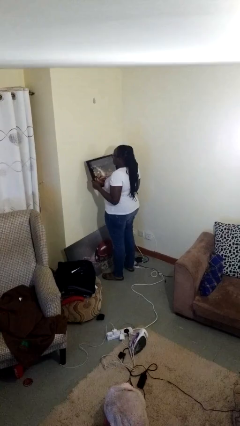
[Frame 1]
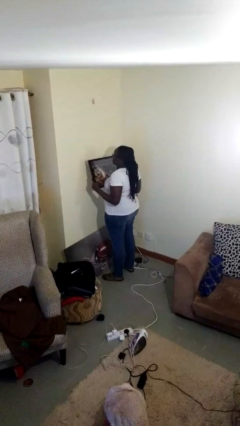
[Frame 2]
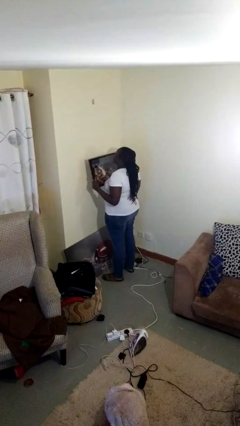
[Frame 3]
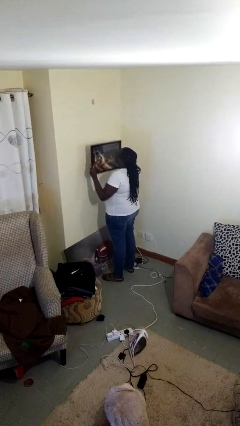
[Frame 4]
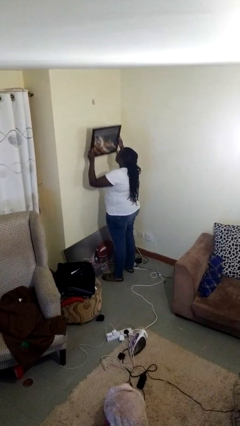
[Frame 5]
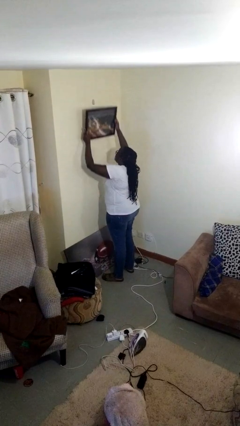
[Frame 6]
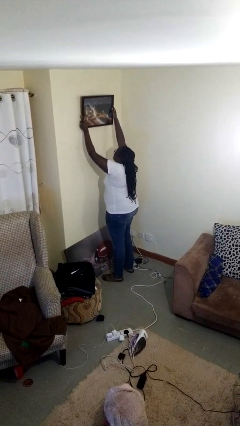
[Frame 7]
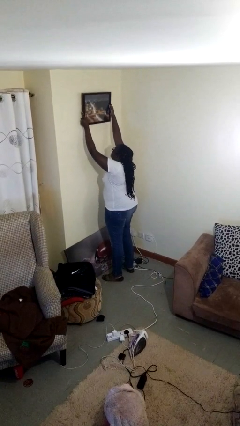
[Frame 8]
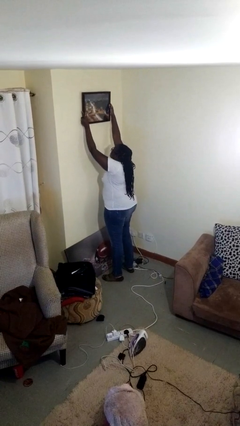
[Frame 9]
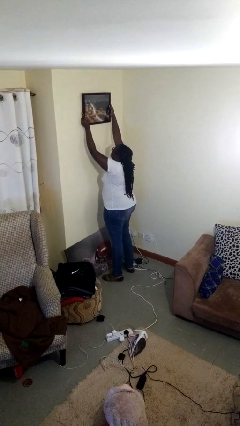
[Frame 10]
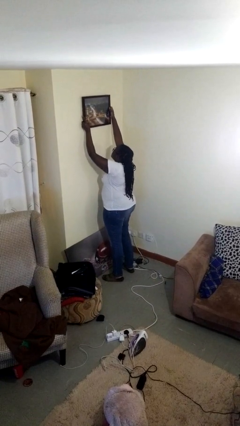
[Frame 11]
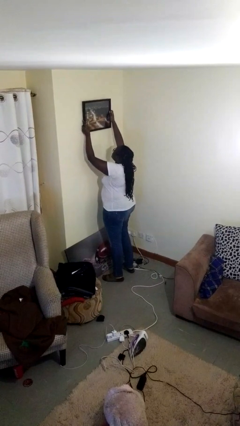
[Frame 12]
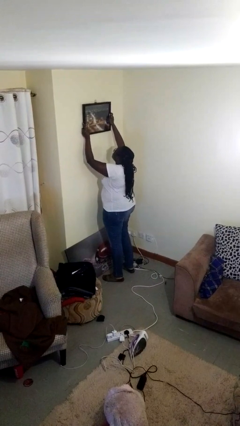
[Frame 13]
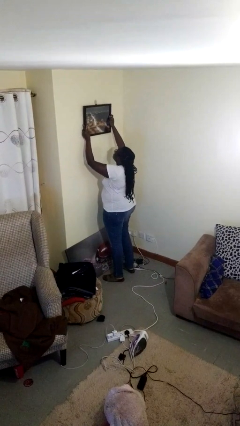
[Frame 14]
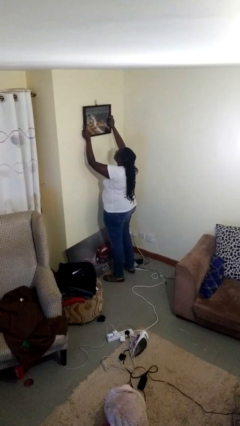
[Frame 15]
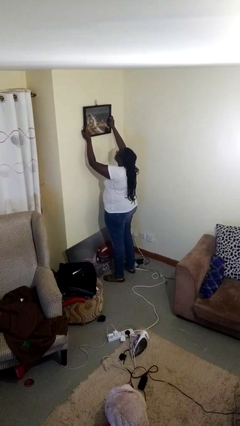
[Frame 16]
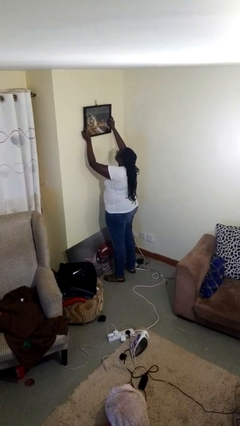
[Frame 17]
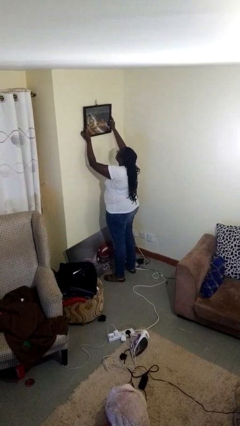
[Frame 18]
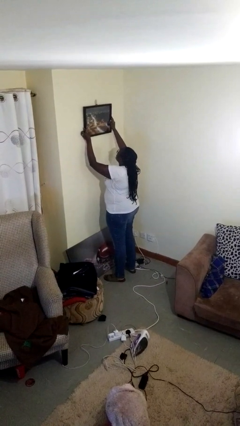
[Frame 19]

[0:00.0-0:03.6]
person puts up picture frame

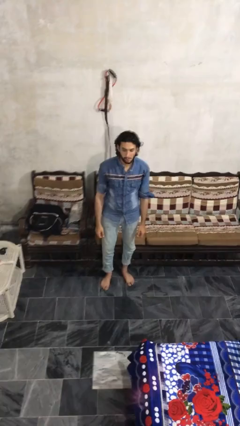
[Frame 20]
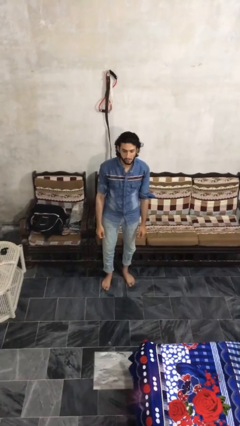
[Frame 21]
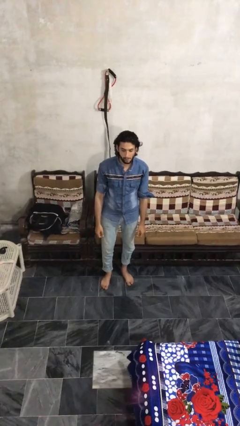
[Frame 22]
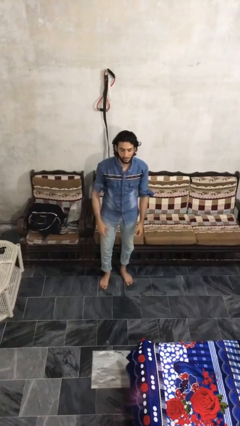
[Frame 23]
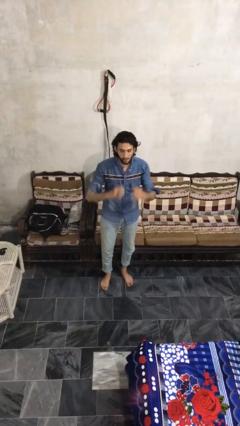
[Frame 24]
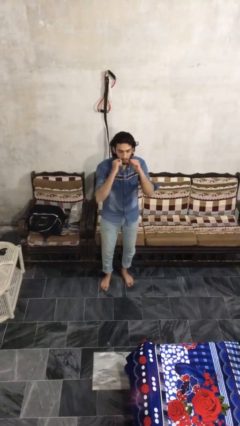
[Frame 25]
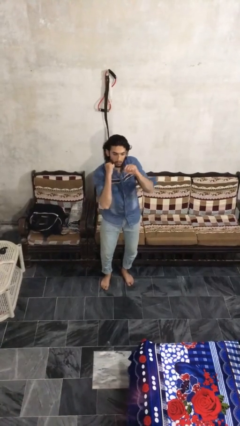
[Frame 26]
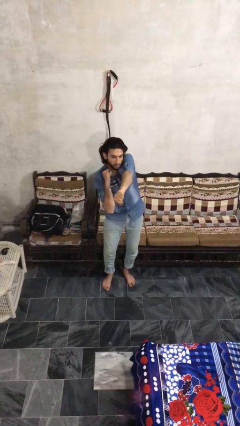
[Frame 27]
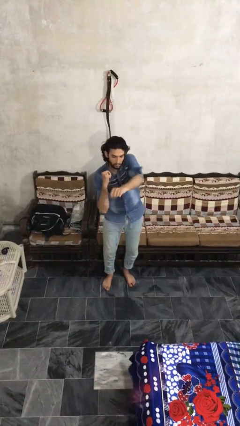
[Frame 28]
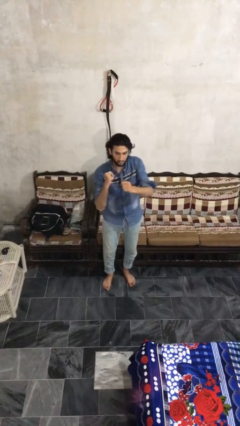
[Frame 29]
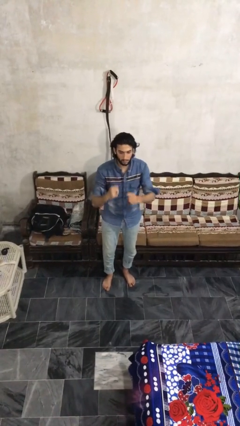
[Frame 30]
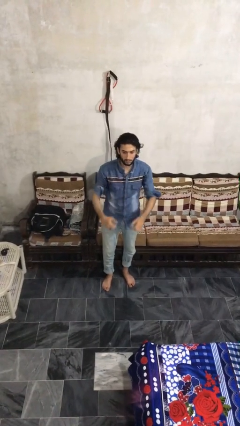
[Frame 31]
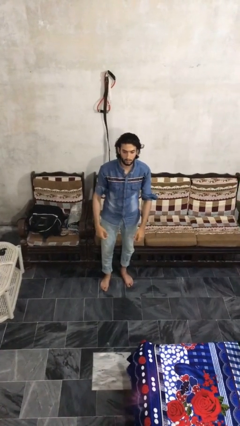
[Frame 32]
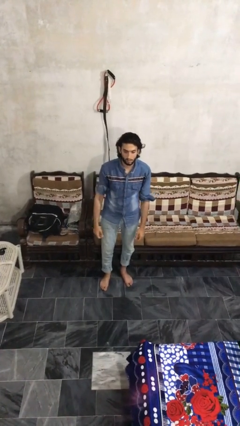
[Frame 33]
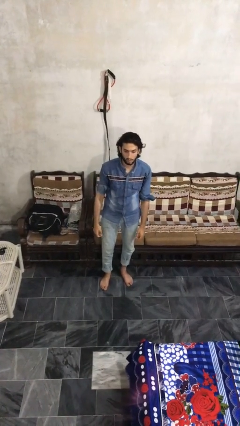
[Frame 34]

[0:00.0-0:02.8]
person punches

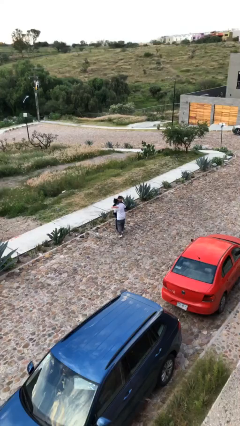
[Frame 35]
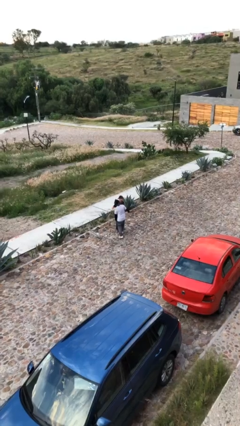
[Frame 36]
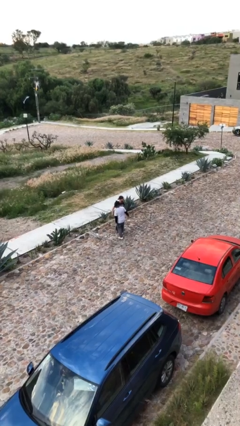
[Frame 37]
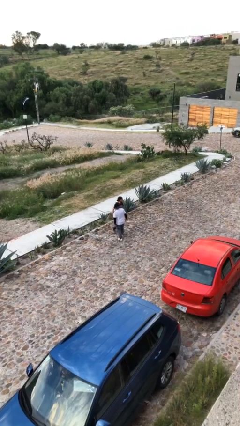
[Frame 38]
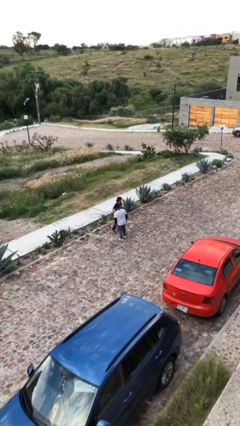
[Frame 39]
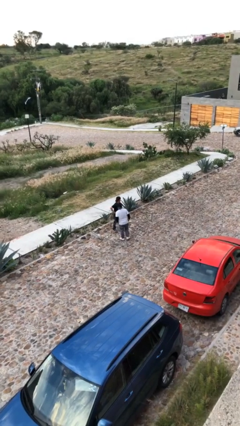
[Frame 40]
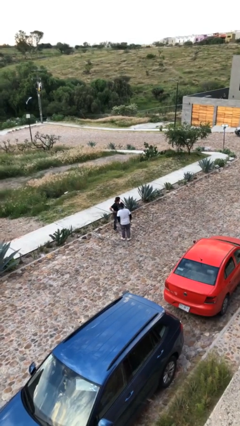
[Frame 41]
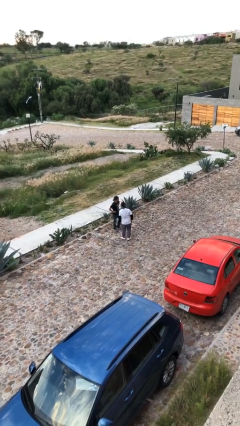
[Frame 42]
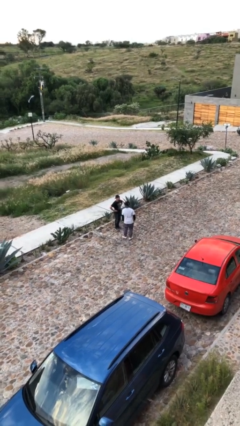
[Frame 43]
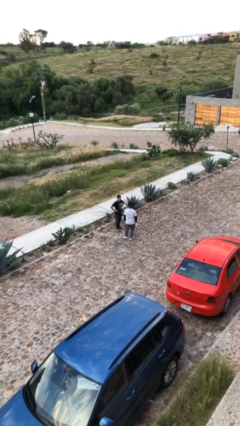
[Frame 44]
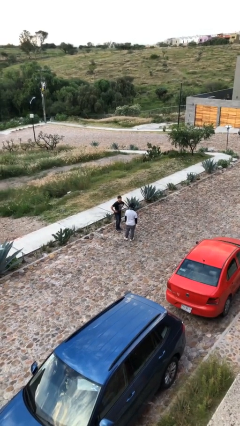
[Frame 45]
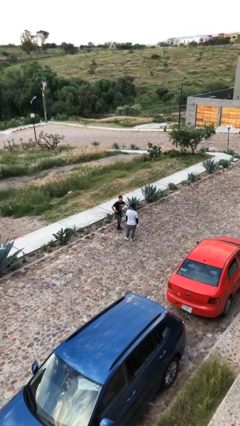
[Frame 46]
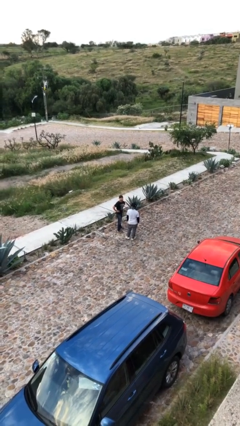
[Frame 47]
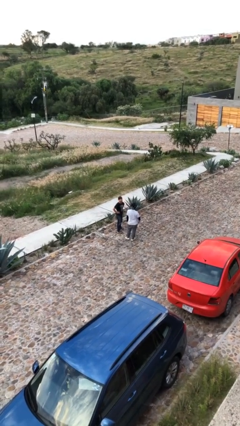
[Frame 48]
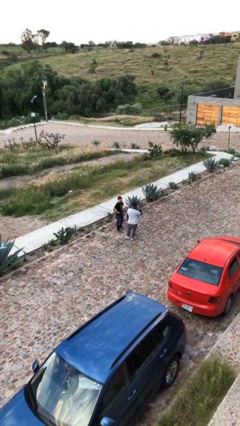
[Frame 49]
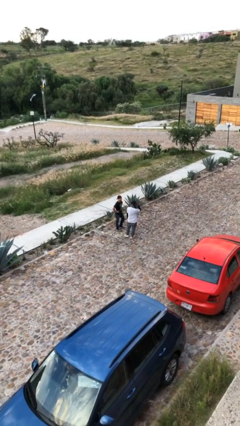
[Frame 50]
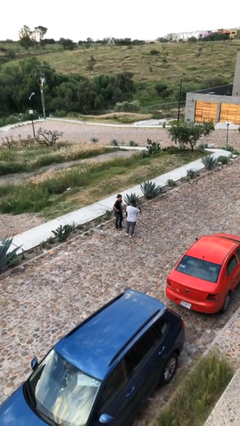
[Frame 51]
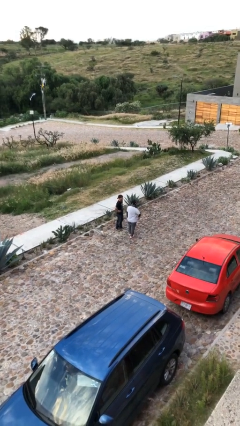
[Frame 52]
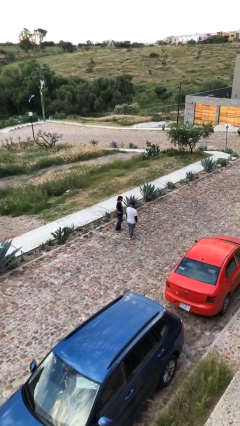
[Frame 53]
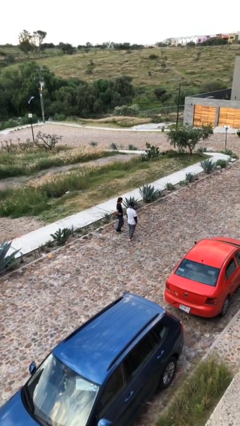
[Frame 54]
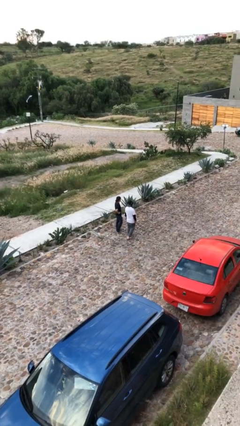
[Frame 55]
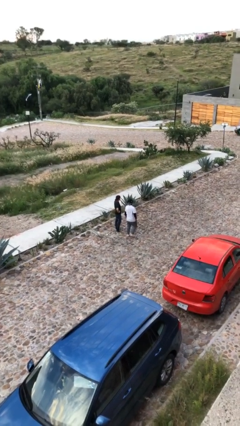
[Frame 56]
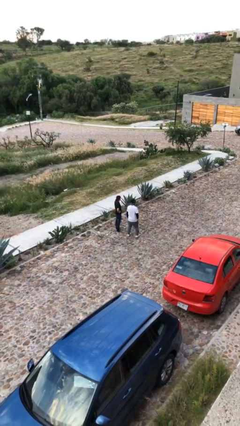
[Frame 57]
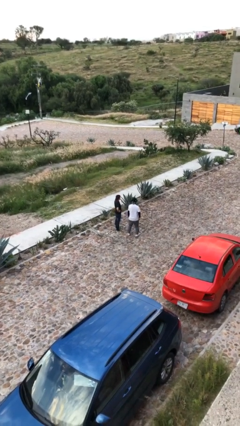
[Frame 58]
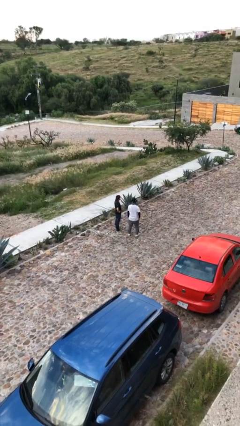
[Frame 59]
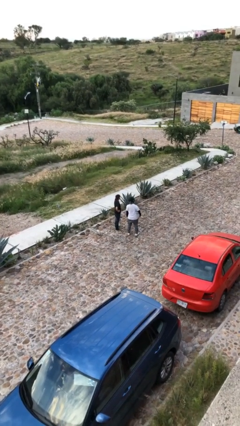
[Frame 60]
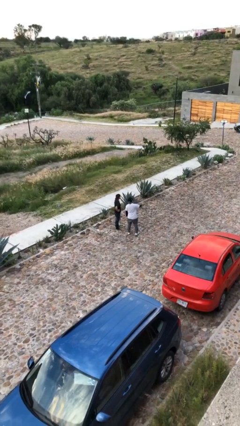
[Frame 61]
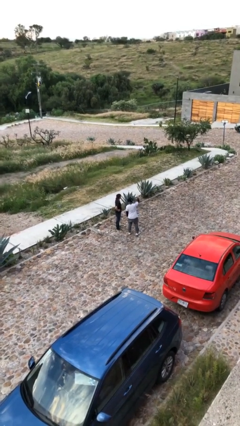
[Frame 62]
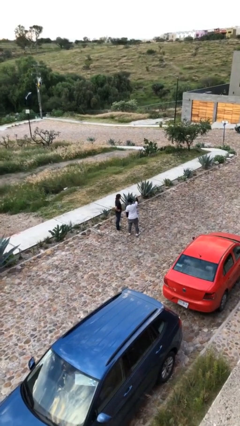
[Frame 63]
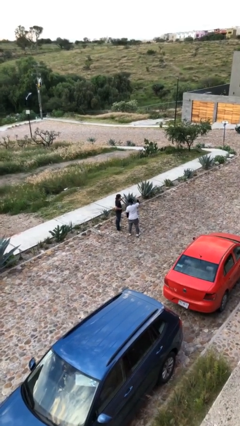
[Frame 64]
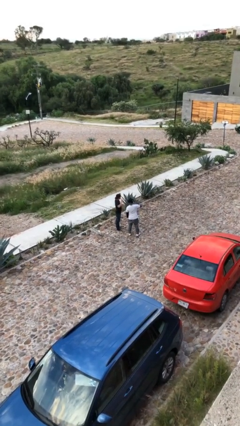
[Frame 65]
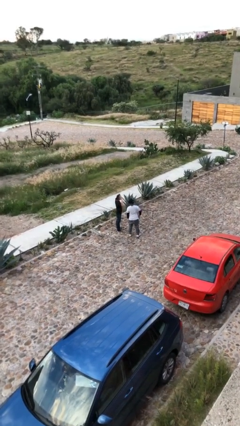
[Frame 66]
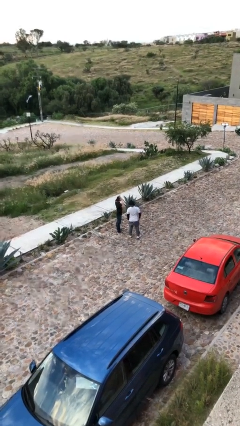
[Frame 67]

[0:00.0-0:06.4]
person talks to person

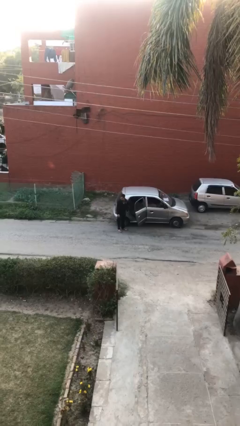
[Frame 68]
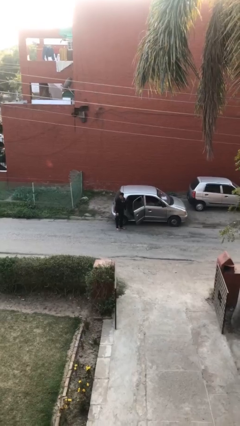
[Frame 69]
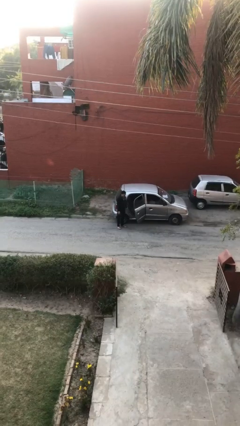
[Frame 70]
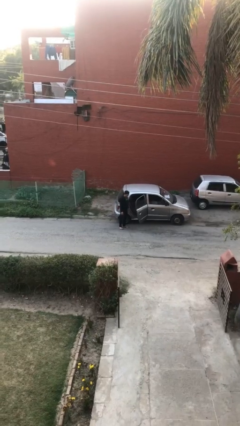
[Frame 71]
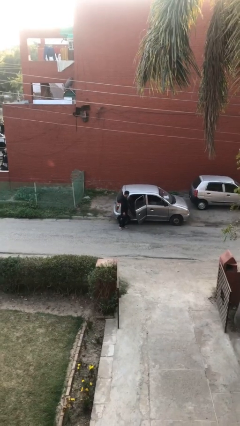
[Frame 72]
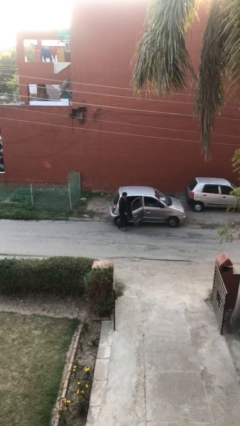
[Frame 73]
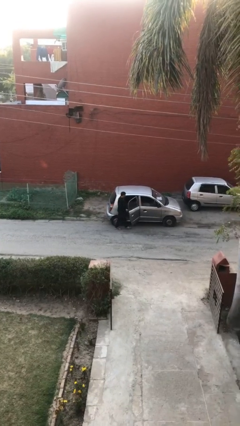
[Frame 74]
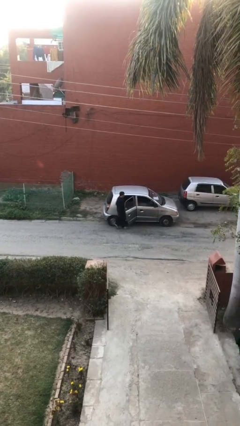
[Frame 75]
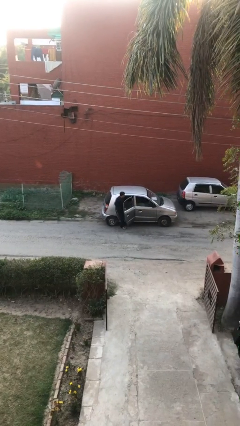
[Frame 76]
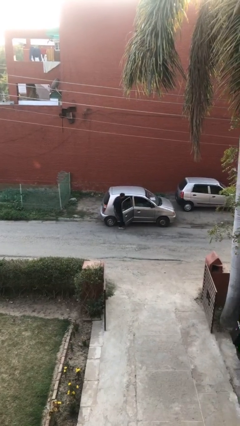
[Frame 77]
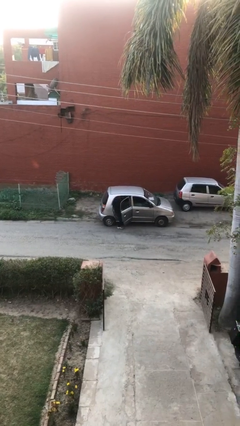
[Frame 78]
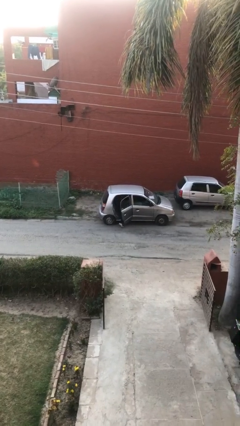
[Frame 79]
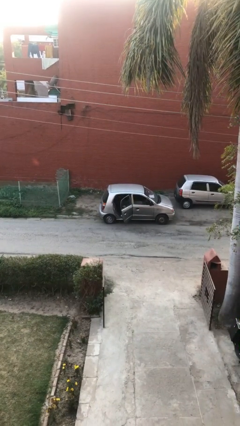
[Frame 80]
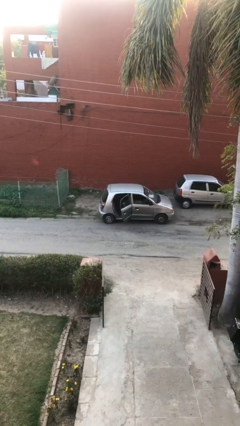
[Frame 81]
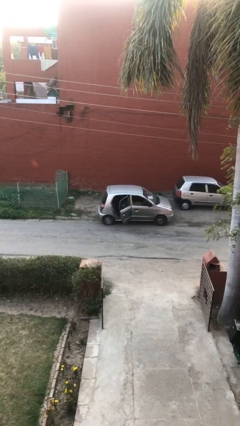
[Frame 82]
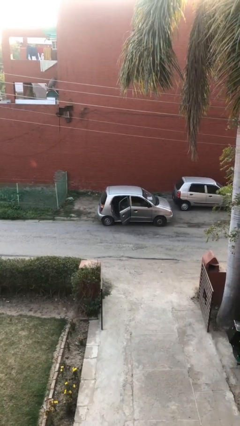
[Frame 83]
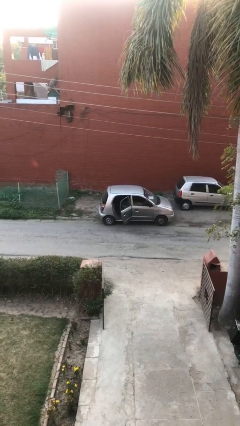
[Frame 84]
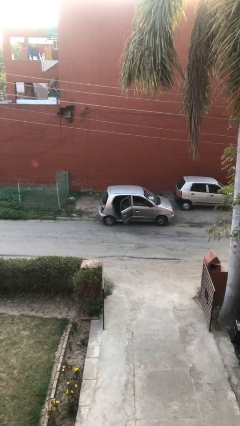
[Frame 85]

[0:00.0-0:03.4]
person enters car

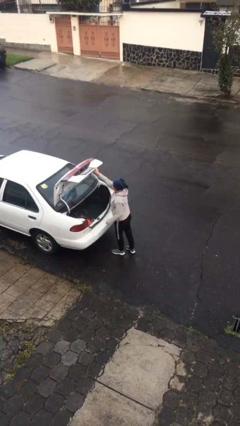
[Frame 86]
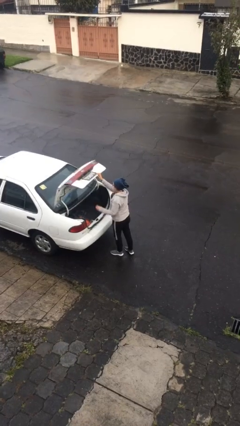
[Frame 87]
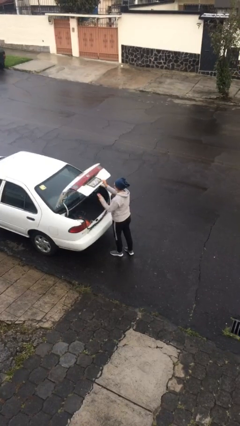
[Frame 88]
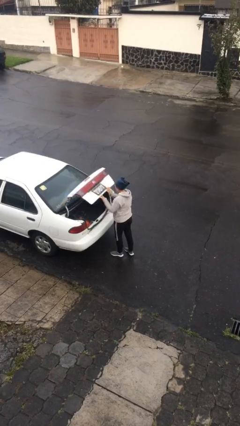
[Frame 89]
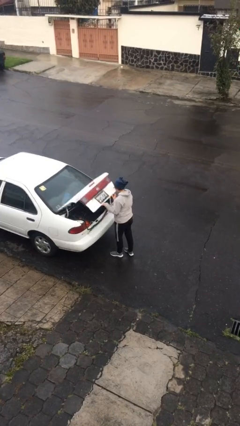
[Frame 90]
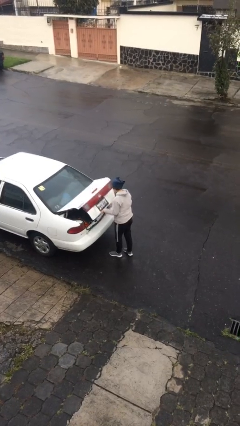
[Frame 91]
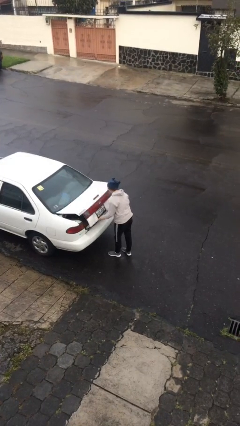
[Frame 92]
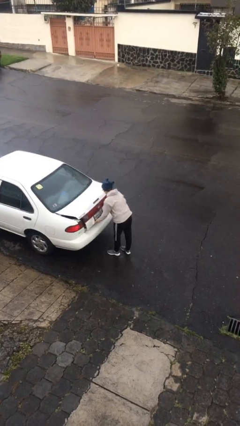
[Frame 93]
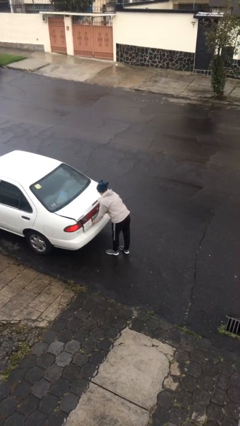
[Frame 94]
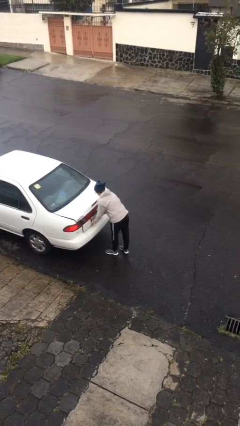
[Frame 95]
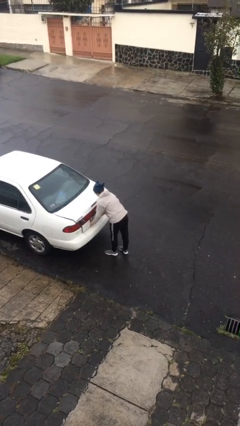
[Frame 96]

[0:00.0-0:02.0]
person closes car trunk
